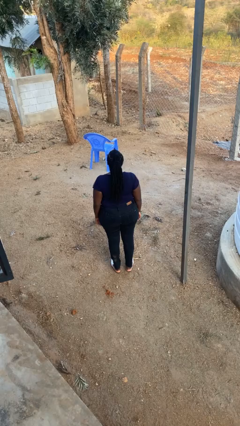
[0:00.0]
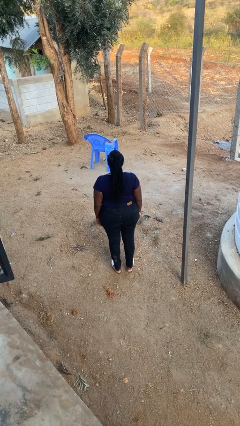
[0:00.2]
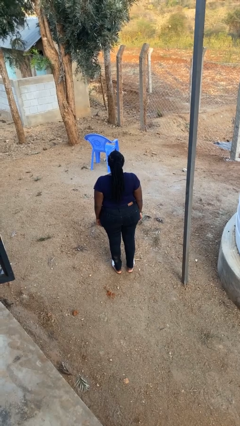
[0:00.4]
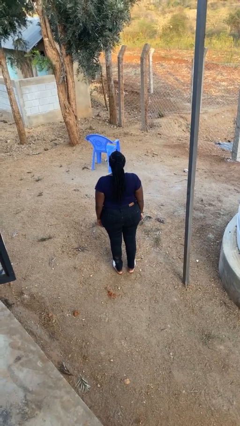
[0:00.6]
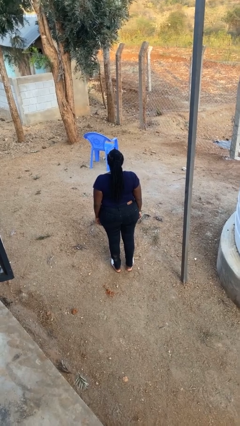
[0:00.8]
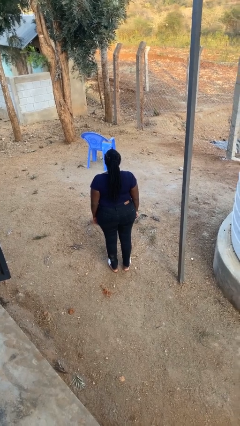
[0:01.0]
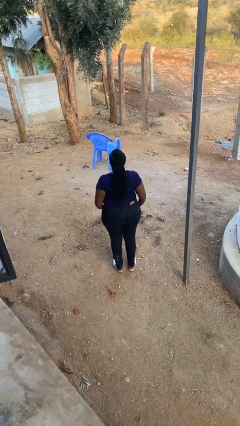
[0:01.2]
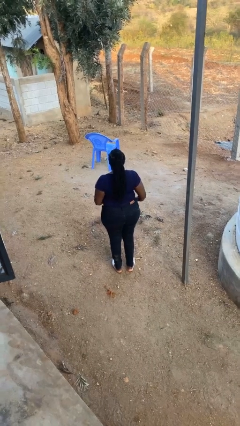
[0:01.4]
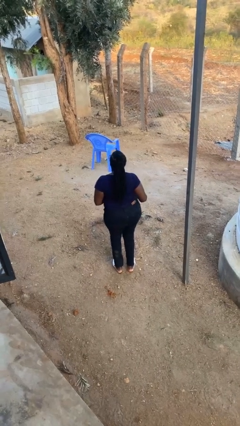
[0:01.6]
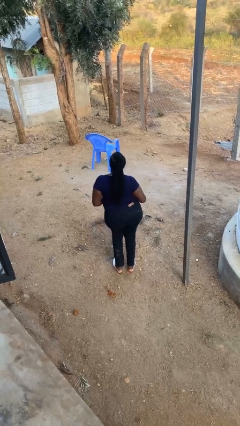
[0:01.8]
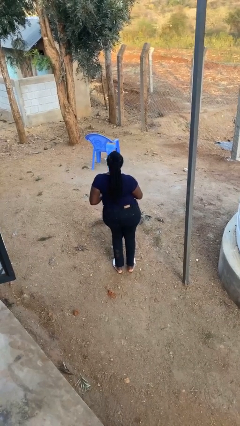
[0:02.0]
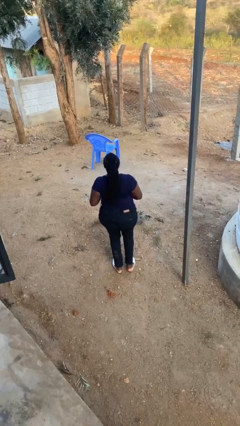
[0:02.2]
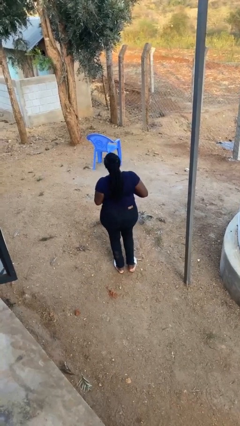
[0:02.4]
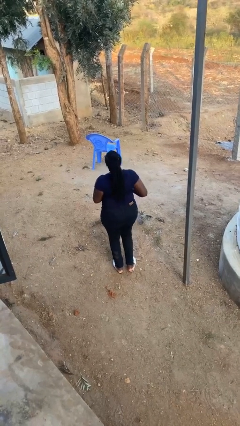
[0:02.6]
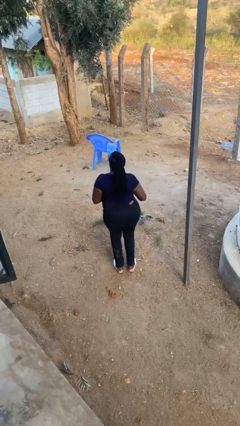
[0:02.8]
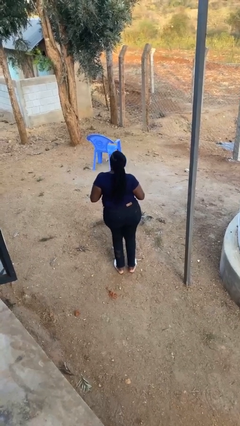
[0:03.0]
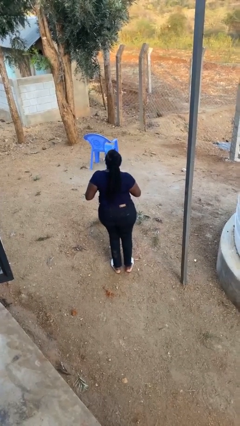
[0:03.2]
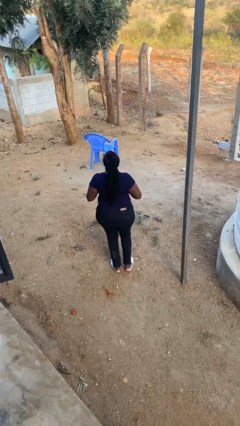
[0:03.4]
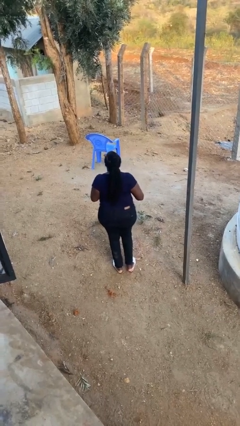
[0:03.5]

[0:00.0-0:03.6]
person wiggles hips

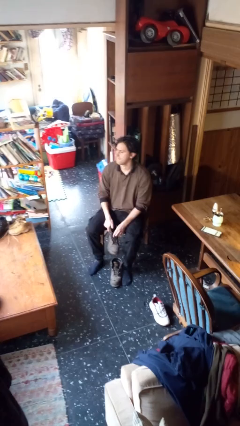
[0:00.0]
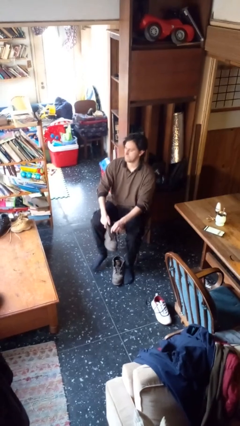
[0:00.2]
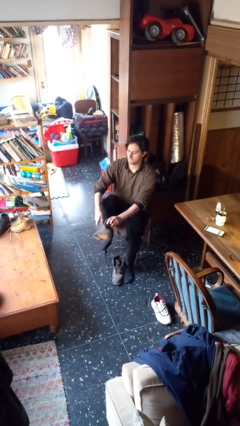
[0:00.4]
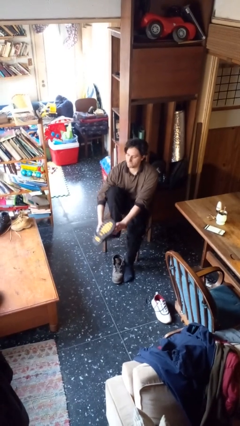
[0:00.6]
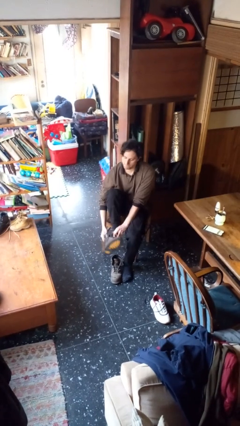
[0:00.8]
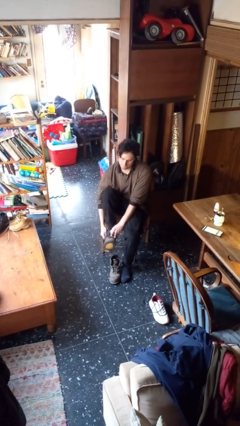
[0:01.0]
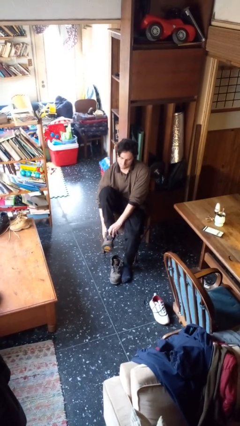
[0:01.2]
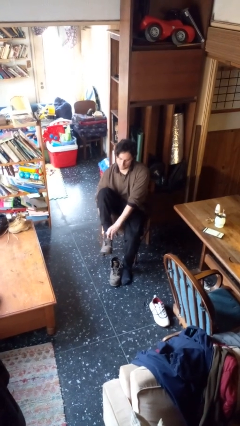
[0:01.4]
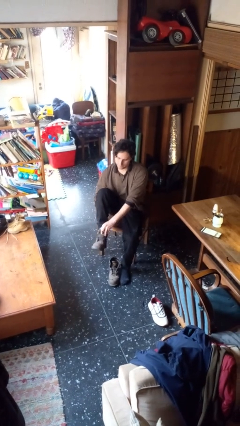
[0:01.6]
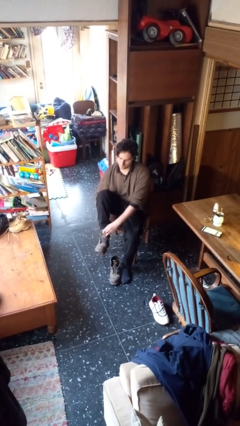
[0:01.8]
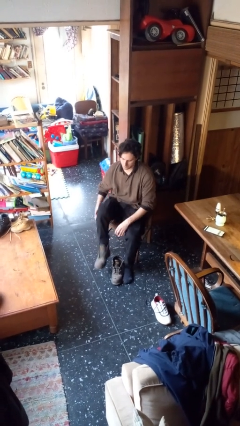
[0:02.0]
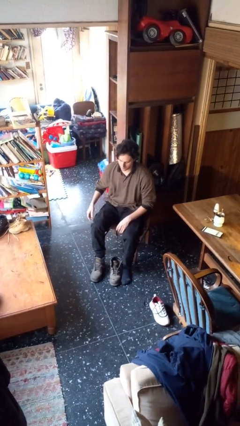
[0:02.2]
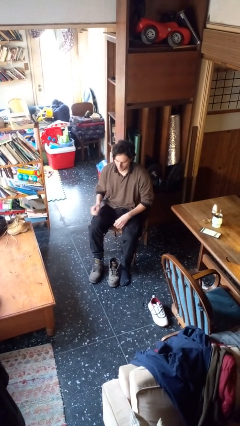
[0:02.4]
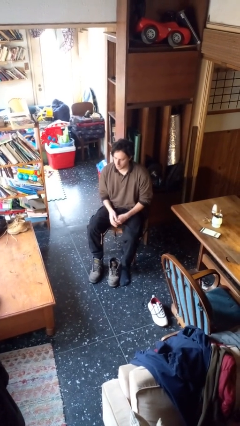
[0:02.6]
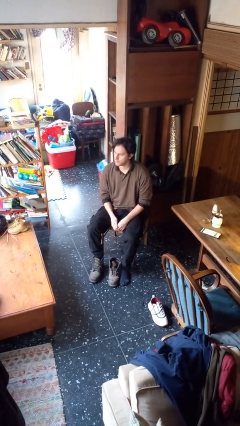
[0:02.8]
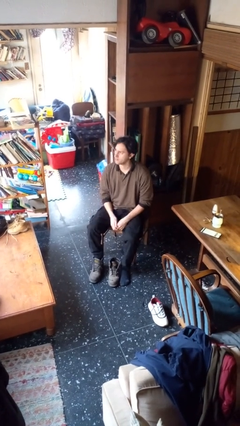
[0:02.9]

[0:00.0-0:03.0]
person puts on boots

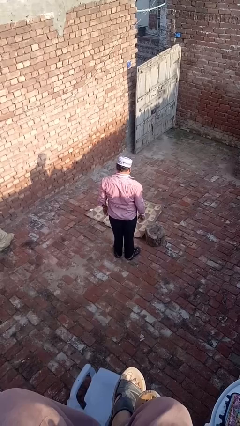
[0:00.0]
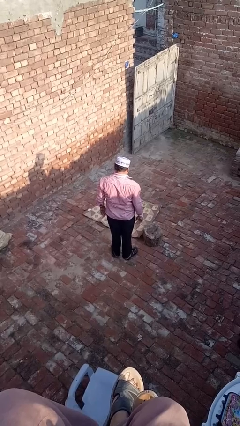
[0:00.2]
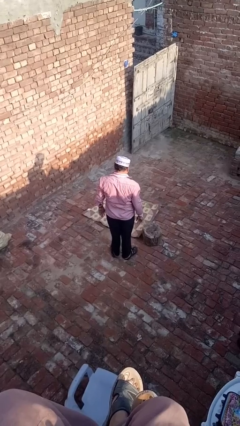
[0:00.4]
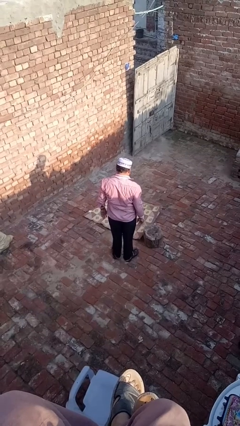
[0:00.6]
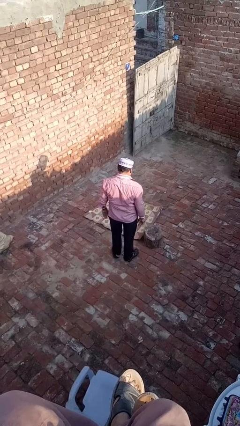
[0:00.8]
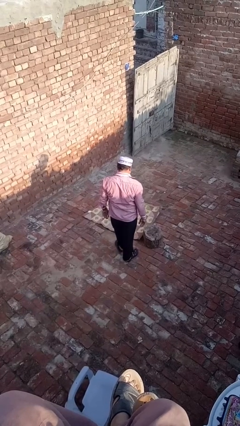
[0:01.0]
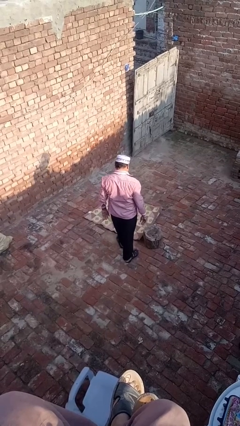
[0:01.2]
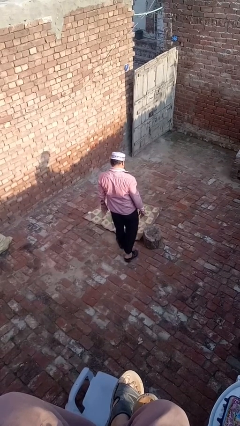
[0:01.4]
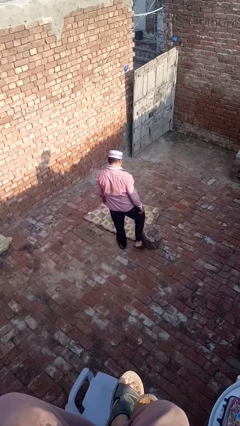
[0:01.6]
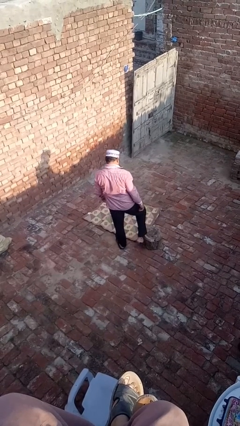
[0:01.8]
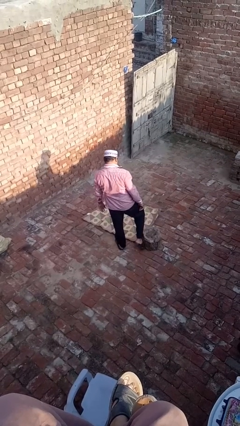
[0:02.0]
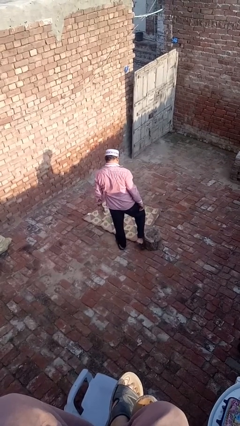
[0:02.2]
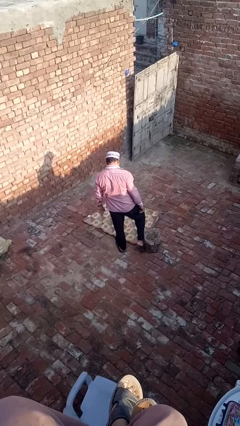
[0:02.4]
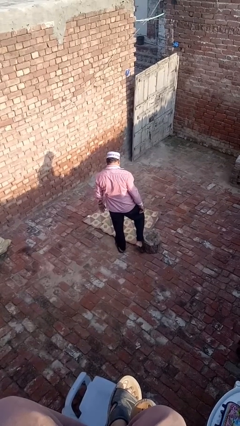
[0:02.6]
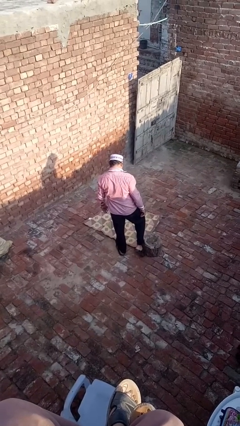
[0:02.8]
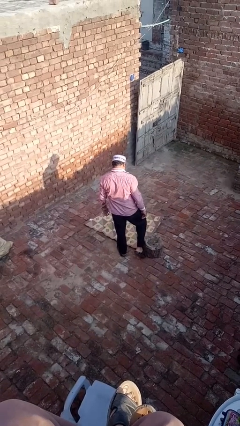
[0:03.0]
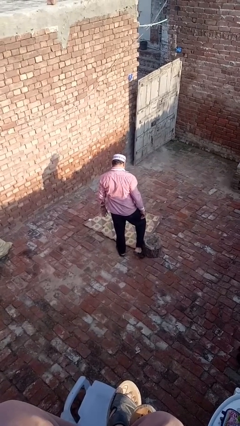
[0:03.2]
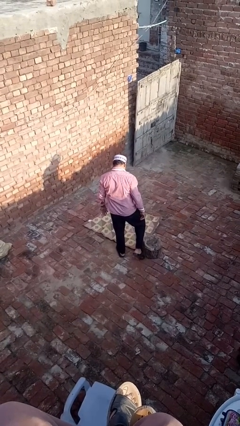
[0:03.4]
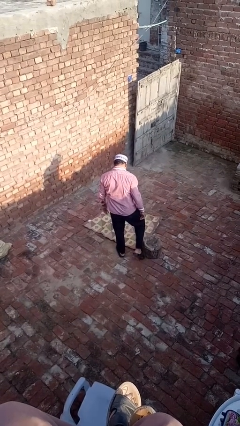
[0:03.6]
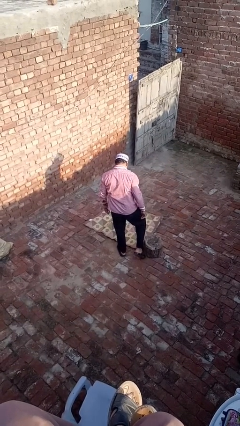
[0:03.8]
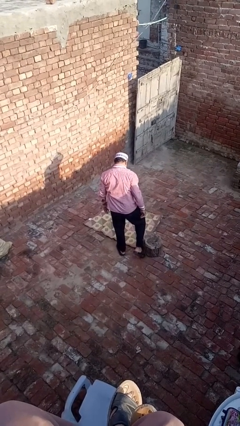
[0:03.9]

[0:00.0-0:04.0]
person trips on object on floor

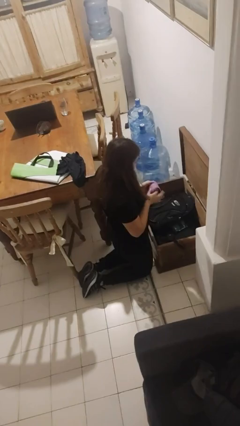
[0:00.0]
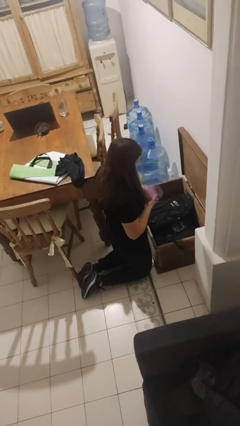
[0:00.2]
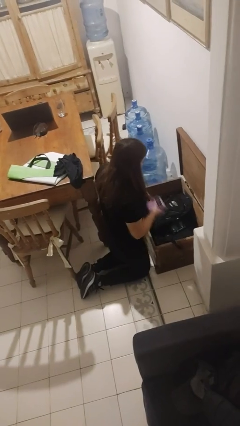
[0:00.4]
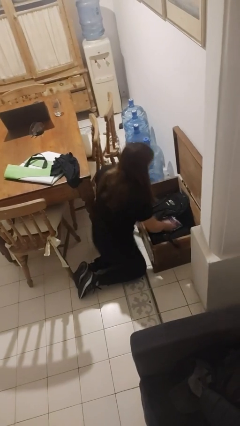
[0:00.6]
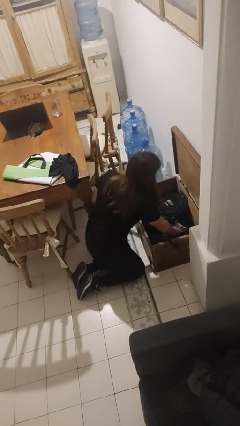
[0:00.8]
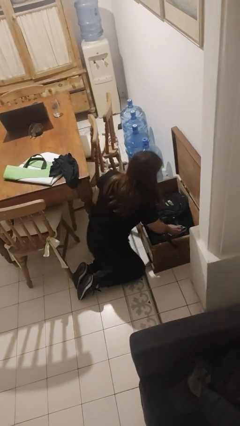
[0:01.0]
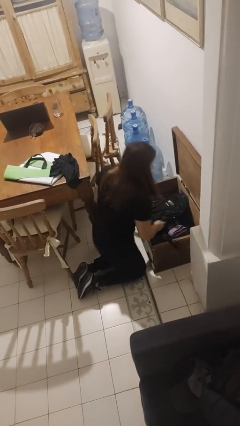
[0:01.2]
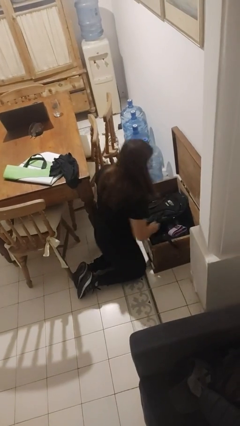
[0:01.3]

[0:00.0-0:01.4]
person puts object into box

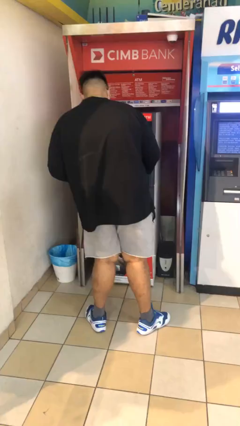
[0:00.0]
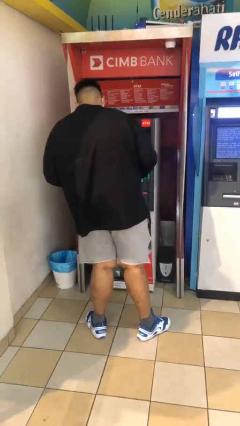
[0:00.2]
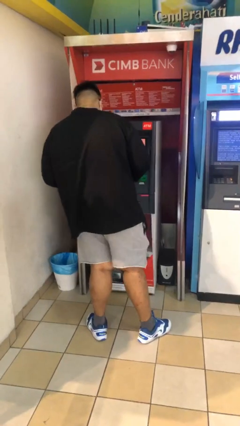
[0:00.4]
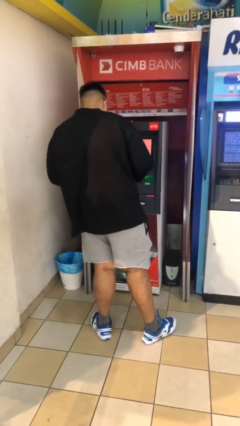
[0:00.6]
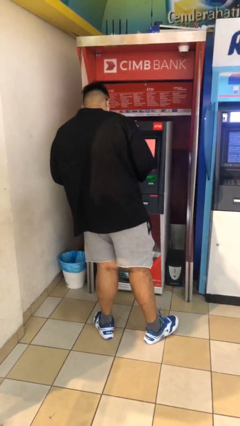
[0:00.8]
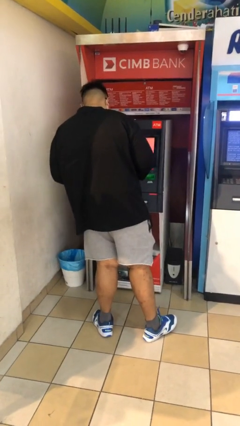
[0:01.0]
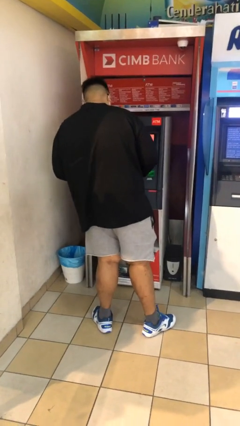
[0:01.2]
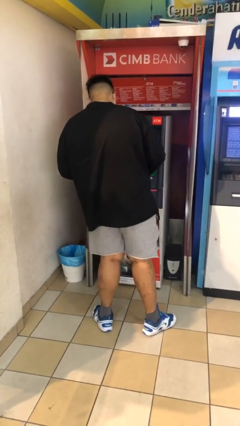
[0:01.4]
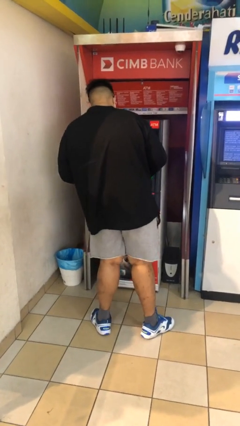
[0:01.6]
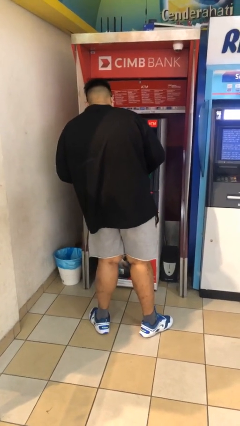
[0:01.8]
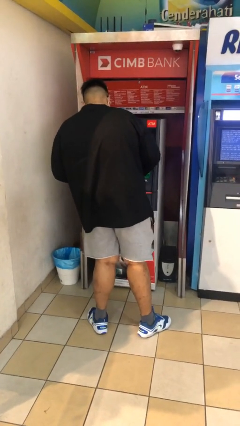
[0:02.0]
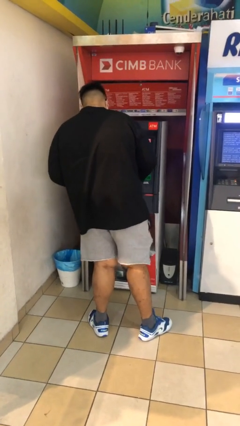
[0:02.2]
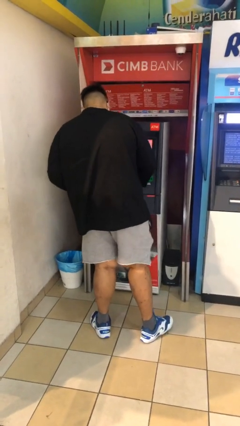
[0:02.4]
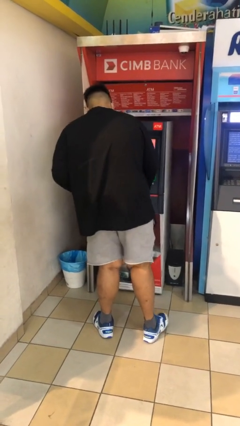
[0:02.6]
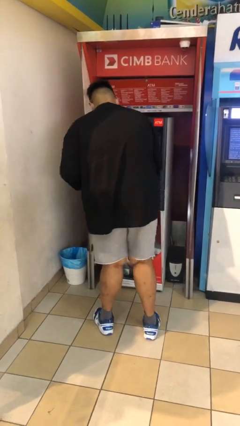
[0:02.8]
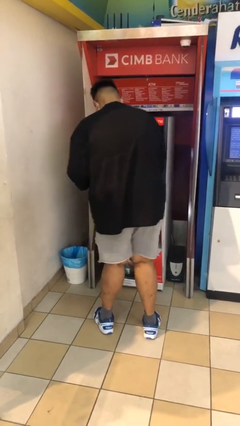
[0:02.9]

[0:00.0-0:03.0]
person purchases from machine

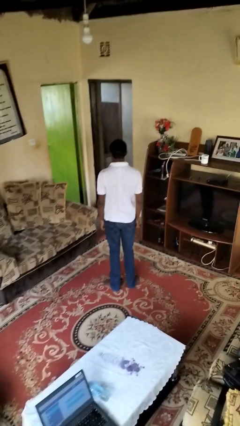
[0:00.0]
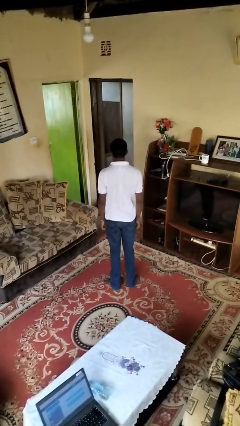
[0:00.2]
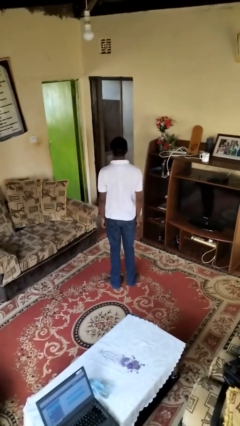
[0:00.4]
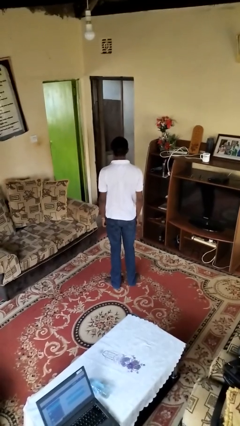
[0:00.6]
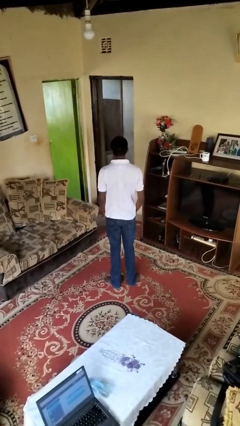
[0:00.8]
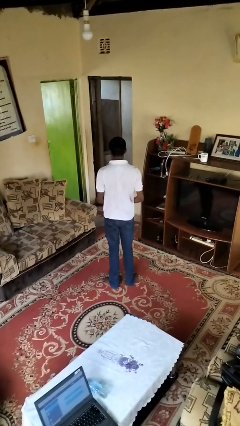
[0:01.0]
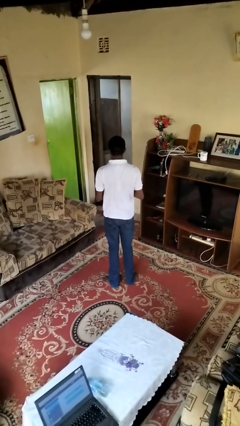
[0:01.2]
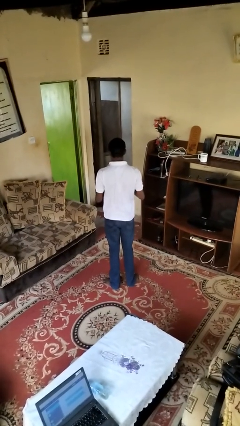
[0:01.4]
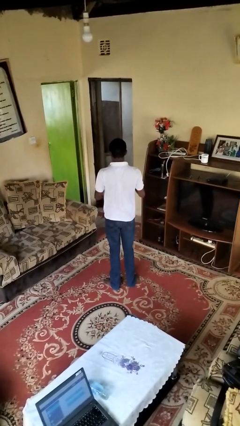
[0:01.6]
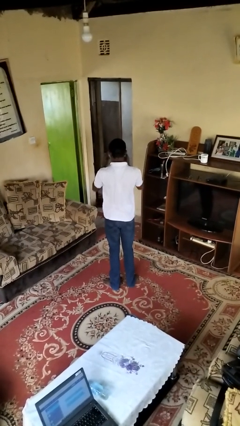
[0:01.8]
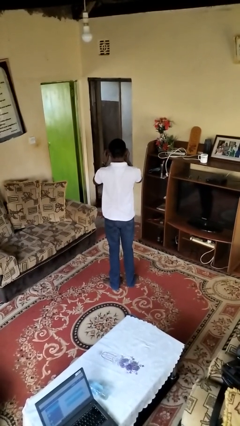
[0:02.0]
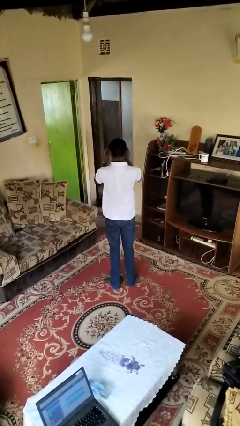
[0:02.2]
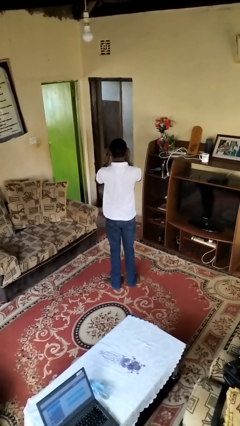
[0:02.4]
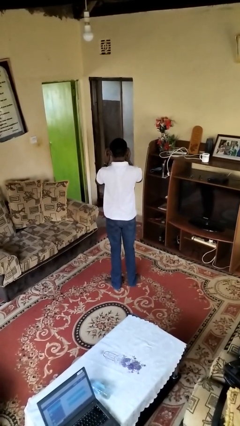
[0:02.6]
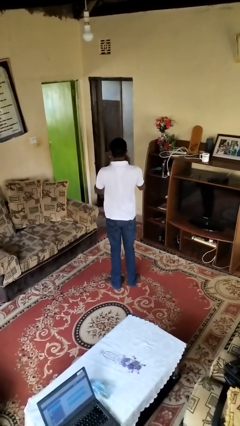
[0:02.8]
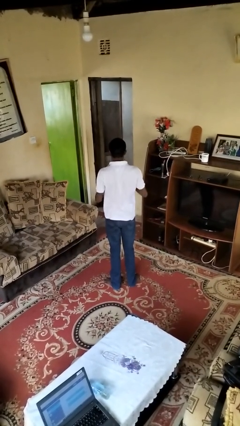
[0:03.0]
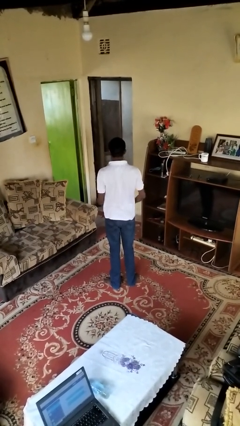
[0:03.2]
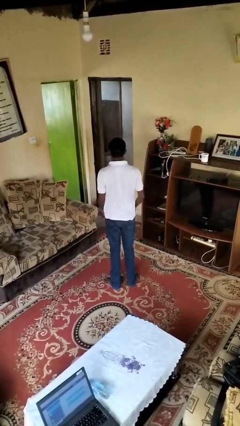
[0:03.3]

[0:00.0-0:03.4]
person puts on sunglasses
